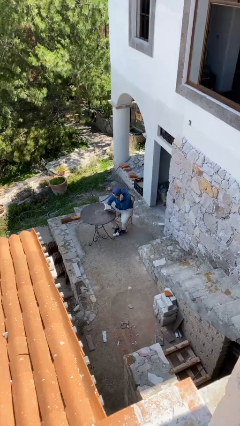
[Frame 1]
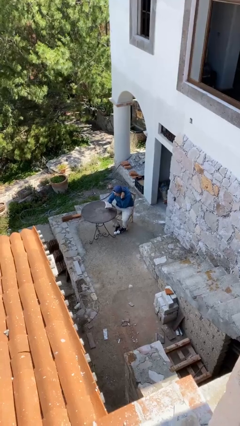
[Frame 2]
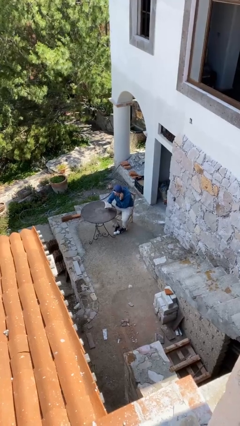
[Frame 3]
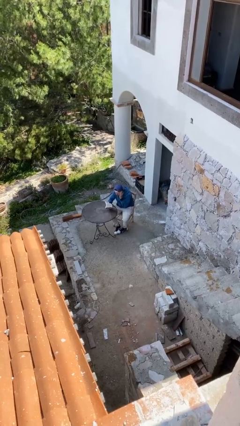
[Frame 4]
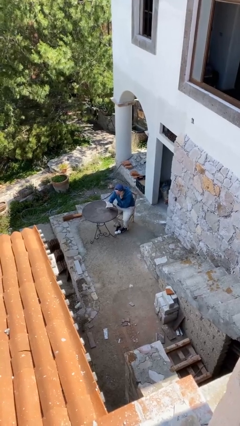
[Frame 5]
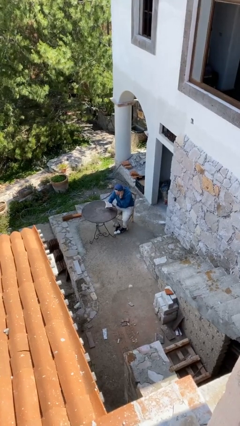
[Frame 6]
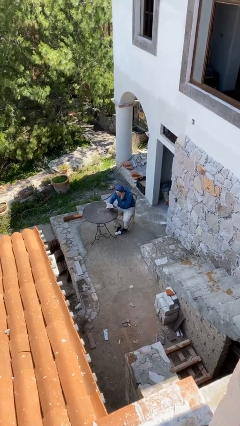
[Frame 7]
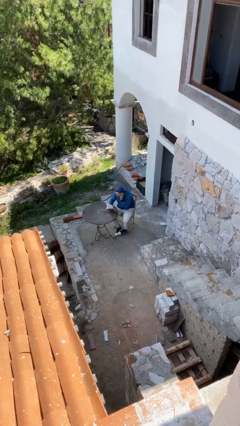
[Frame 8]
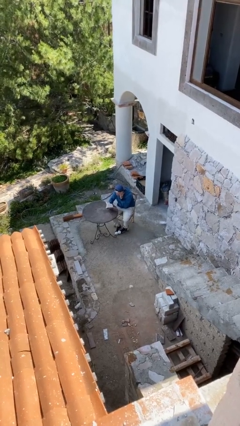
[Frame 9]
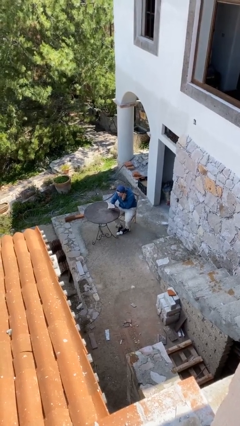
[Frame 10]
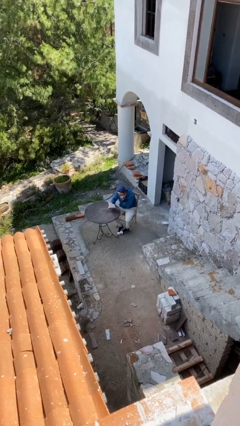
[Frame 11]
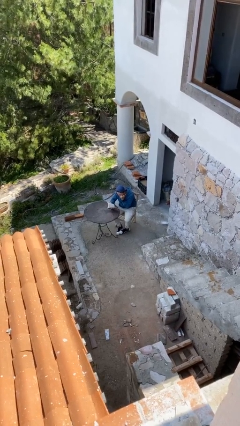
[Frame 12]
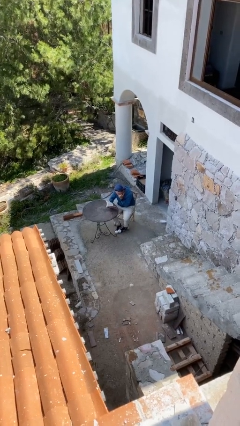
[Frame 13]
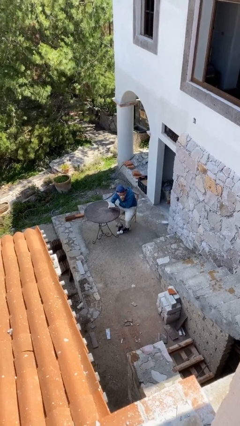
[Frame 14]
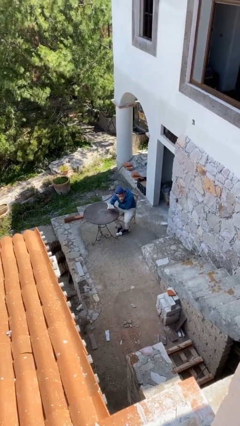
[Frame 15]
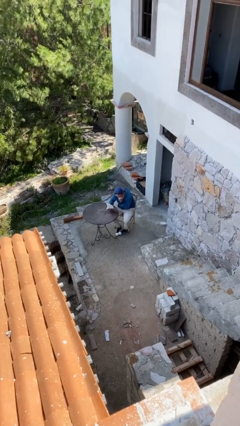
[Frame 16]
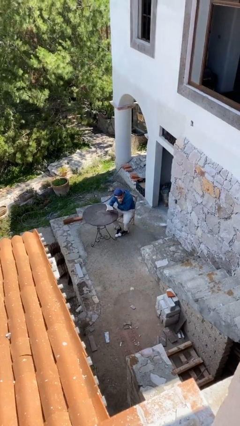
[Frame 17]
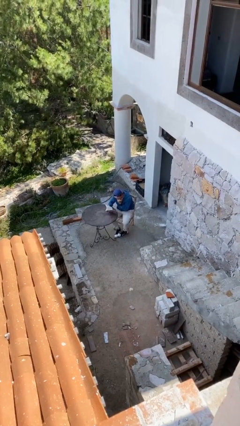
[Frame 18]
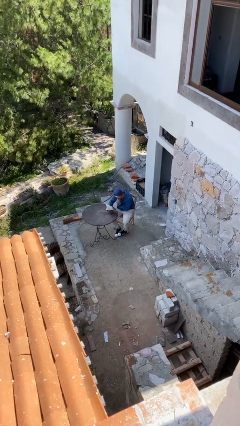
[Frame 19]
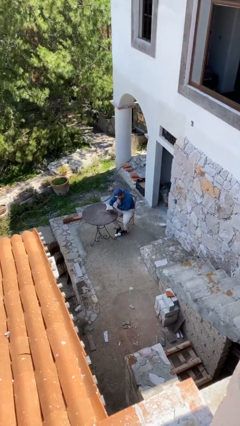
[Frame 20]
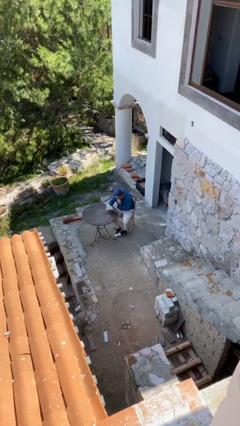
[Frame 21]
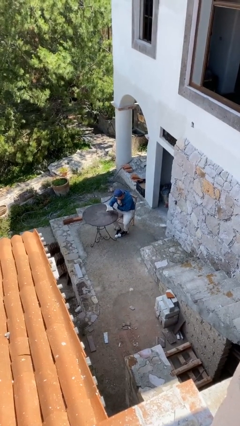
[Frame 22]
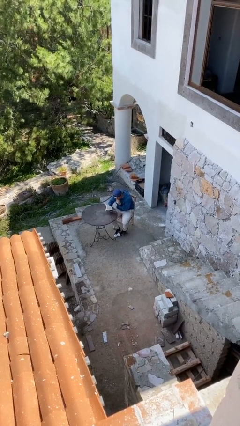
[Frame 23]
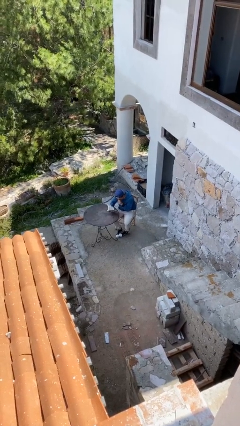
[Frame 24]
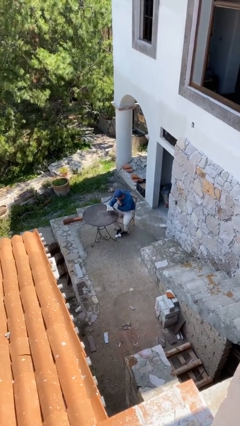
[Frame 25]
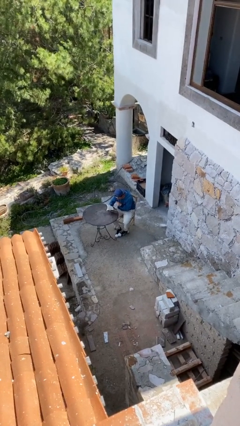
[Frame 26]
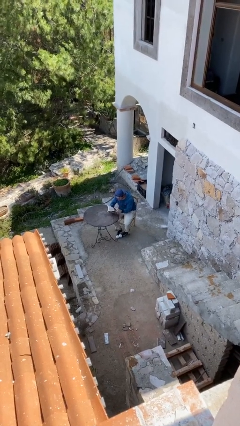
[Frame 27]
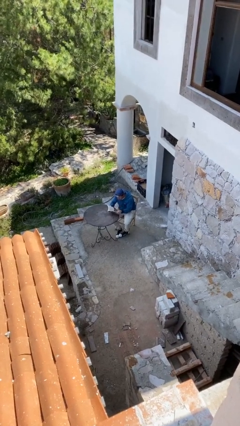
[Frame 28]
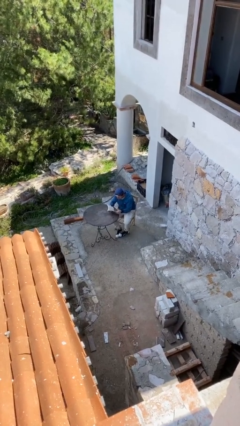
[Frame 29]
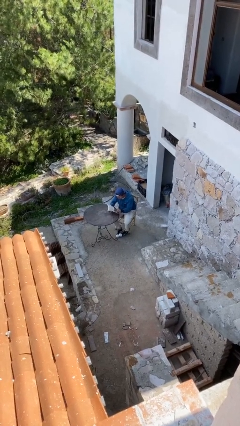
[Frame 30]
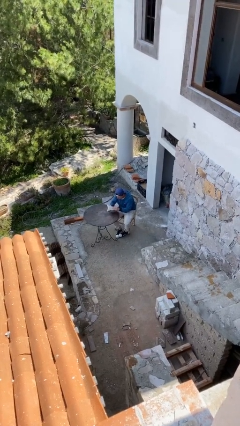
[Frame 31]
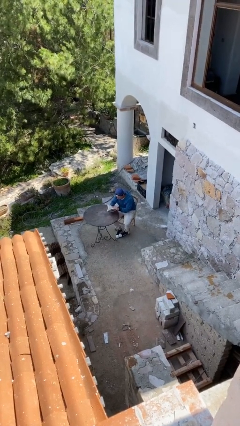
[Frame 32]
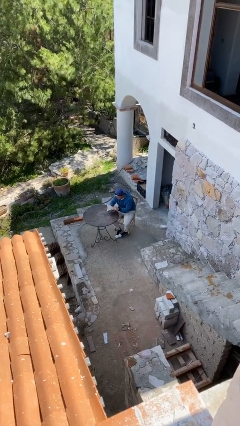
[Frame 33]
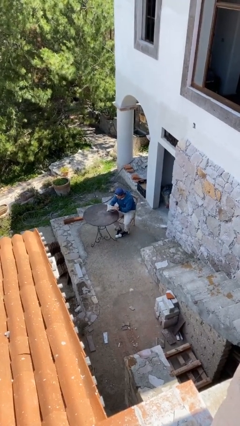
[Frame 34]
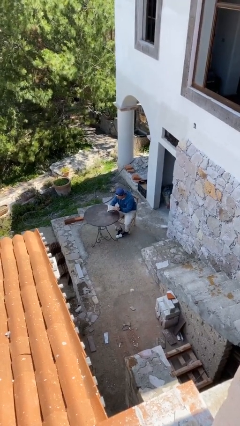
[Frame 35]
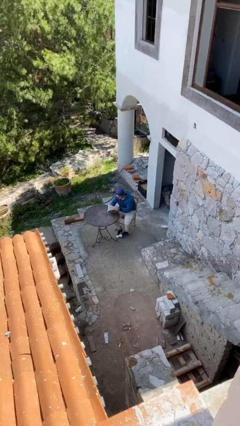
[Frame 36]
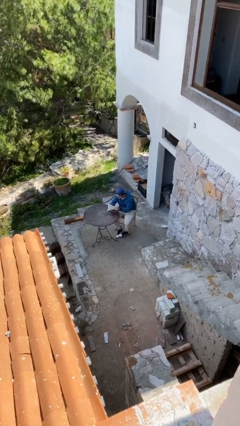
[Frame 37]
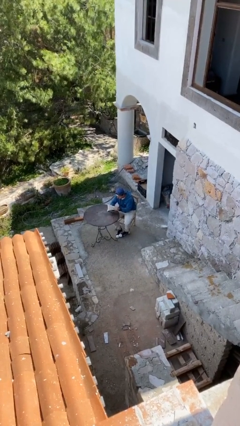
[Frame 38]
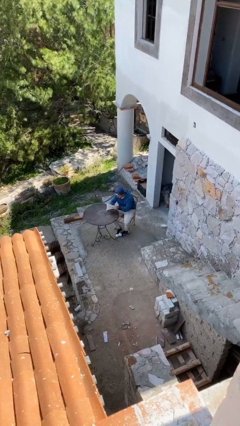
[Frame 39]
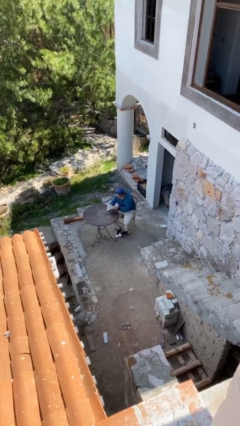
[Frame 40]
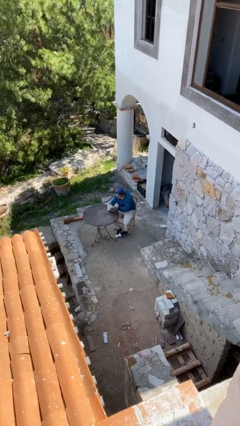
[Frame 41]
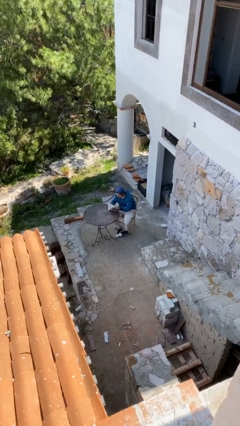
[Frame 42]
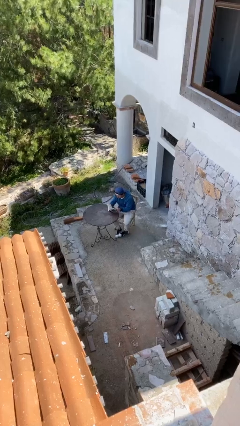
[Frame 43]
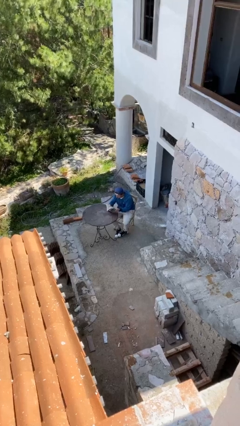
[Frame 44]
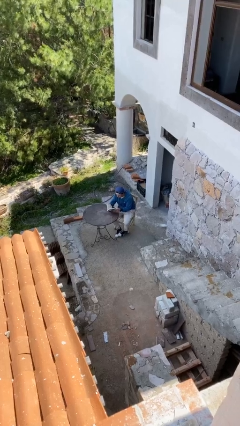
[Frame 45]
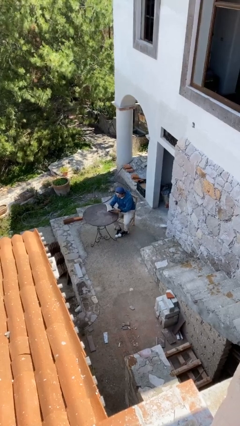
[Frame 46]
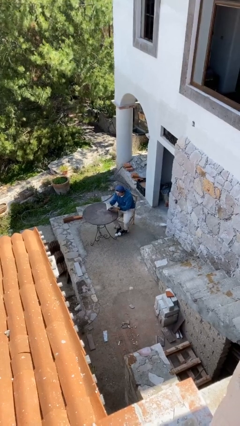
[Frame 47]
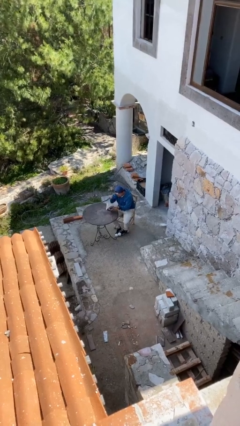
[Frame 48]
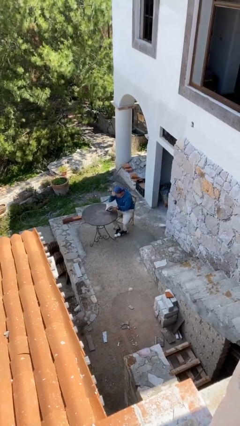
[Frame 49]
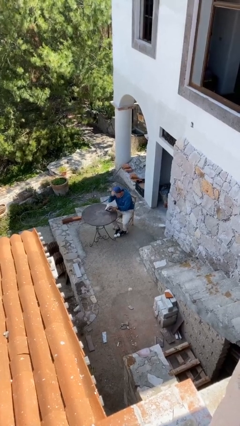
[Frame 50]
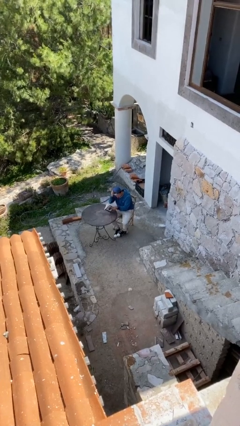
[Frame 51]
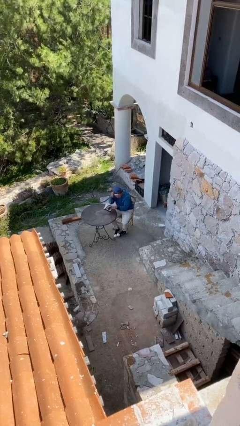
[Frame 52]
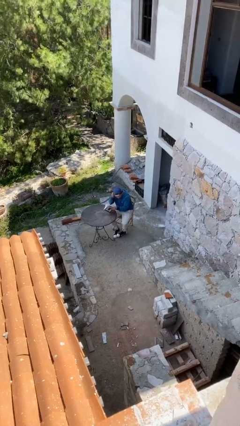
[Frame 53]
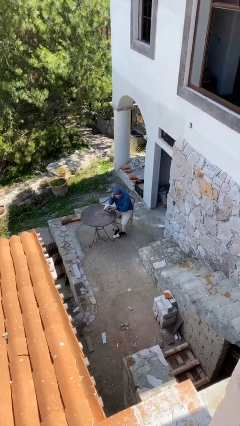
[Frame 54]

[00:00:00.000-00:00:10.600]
person reads document

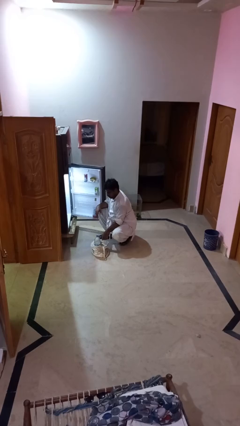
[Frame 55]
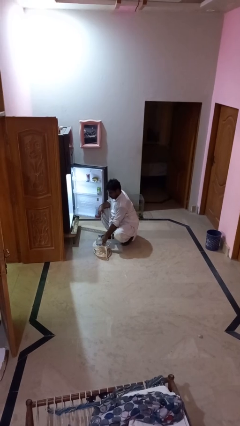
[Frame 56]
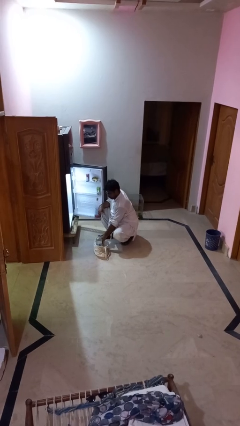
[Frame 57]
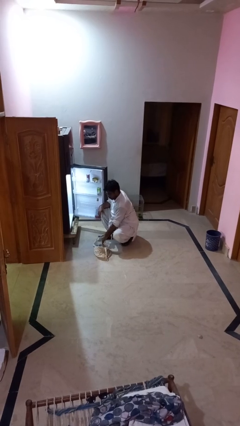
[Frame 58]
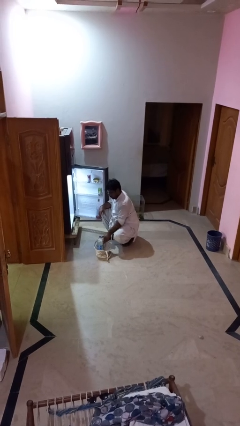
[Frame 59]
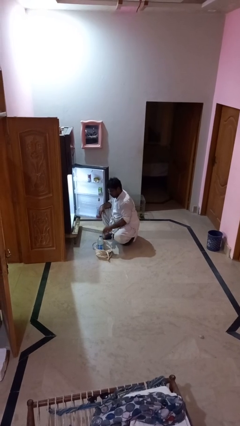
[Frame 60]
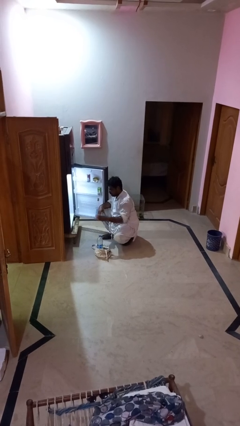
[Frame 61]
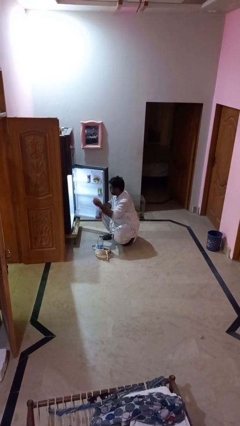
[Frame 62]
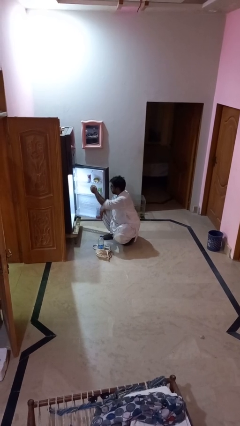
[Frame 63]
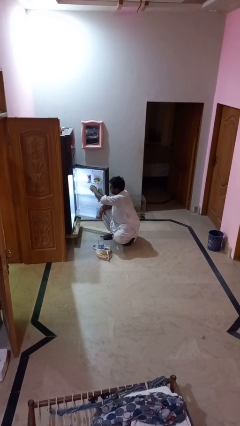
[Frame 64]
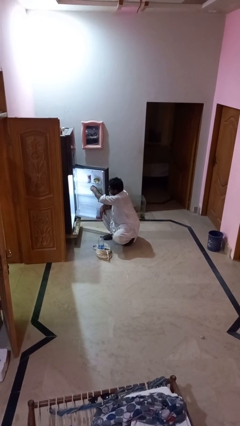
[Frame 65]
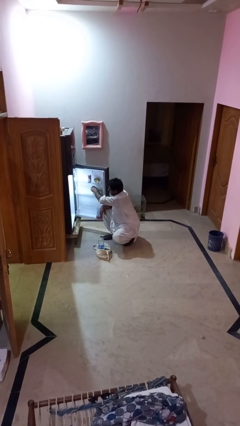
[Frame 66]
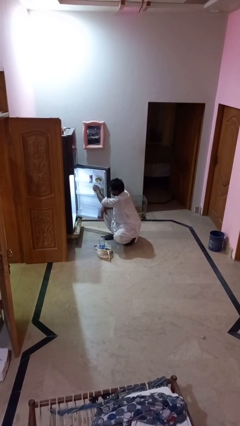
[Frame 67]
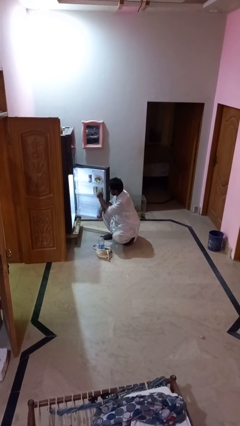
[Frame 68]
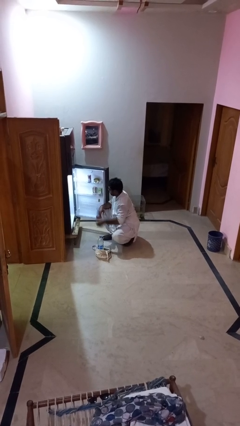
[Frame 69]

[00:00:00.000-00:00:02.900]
person loads groceries into refrigerator

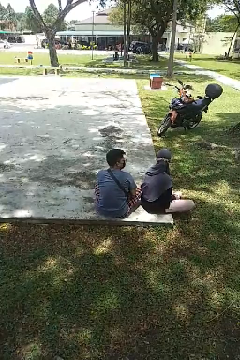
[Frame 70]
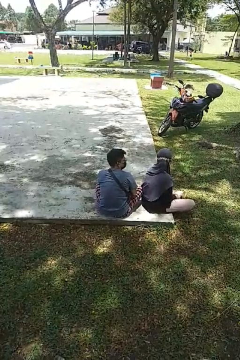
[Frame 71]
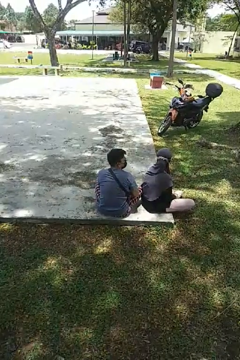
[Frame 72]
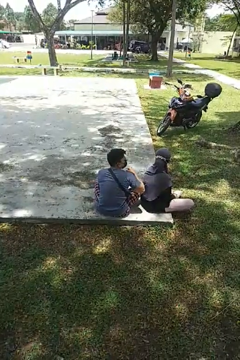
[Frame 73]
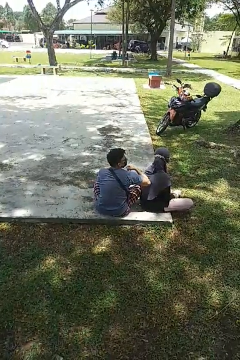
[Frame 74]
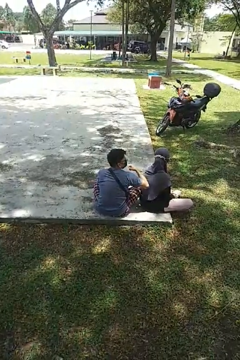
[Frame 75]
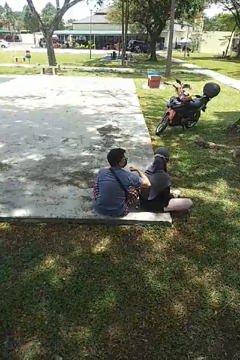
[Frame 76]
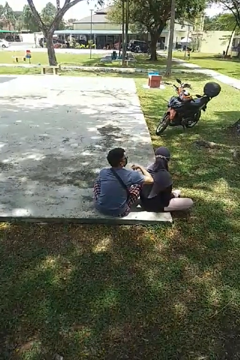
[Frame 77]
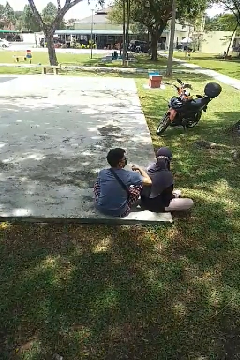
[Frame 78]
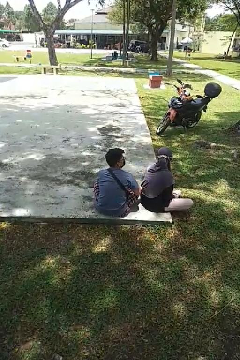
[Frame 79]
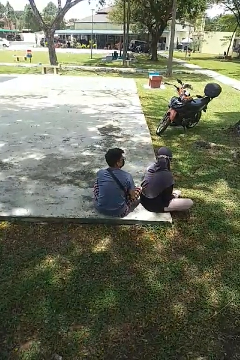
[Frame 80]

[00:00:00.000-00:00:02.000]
person nudges person with elbow

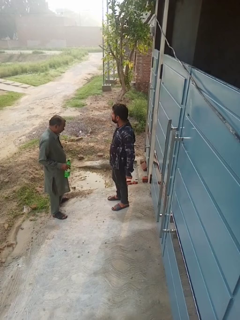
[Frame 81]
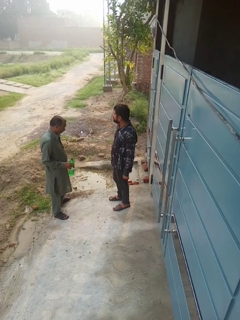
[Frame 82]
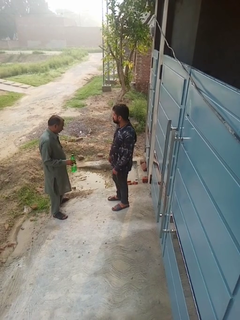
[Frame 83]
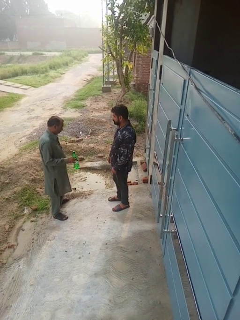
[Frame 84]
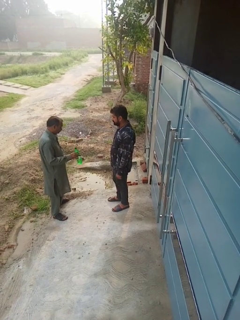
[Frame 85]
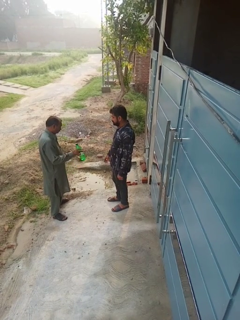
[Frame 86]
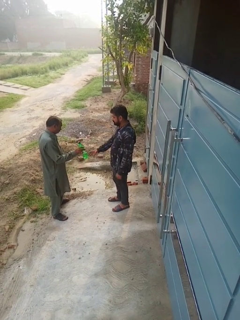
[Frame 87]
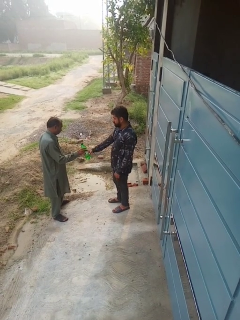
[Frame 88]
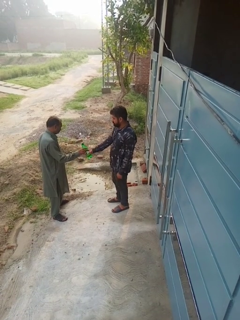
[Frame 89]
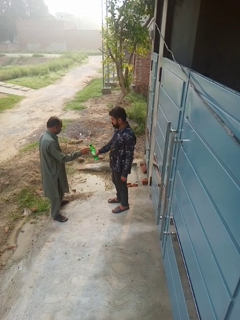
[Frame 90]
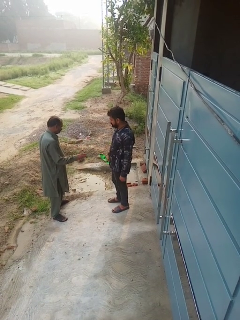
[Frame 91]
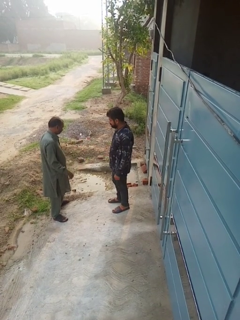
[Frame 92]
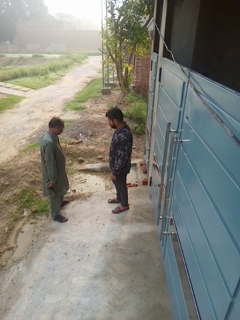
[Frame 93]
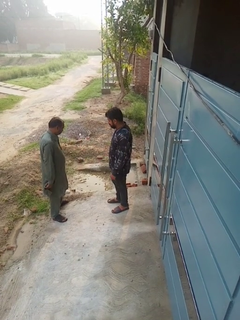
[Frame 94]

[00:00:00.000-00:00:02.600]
person transfers object to person

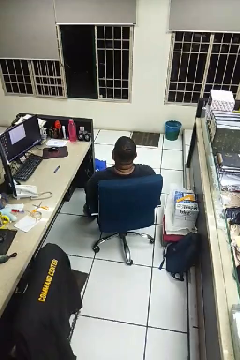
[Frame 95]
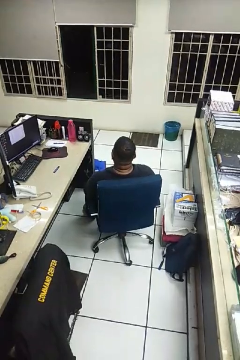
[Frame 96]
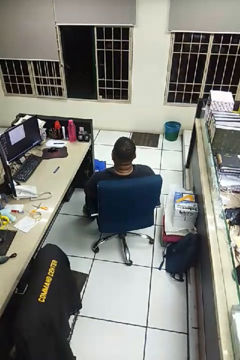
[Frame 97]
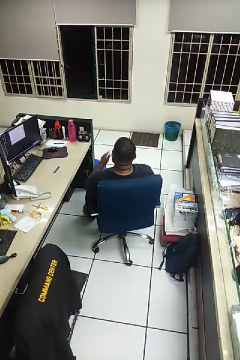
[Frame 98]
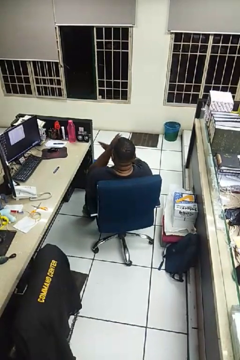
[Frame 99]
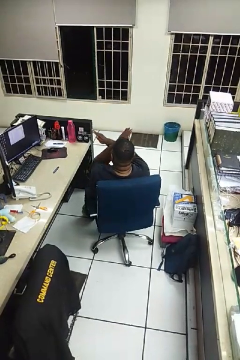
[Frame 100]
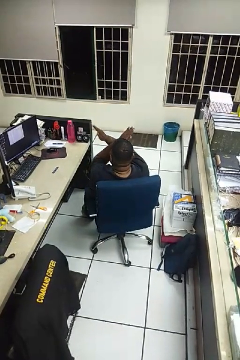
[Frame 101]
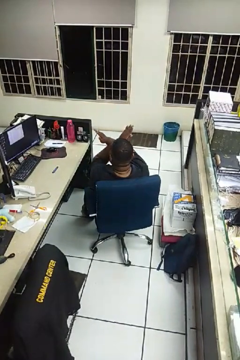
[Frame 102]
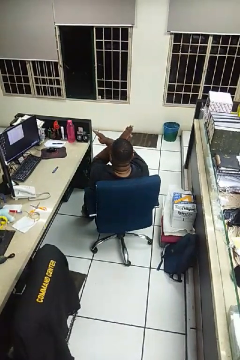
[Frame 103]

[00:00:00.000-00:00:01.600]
person gestures arms x
